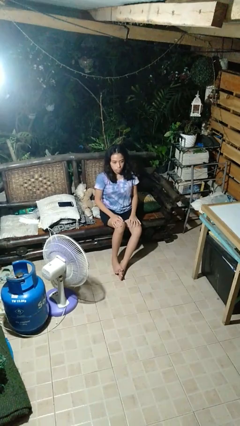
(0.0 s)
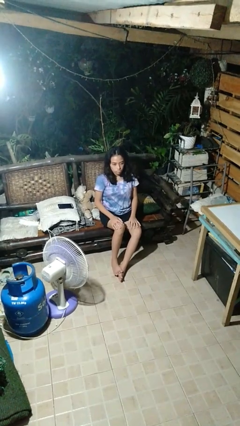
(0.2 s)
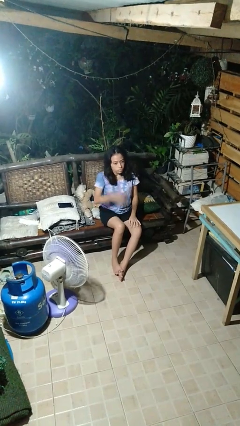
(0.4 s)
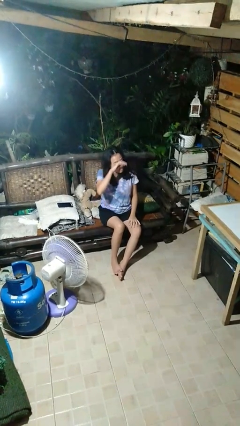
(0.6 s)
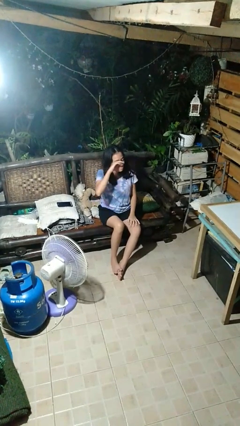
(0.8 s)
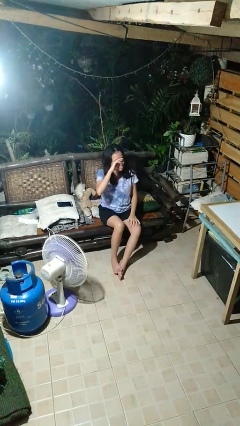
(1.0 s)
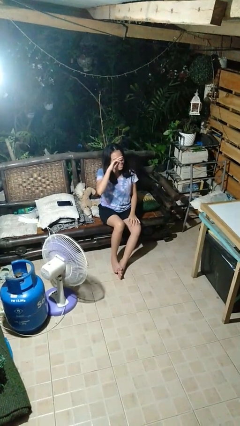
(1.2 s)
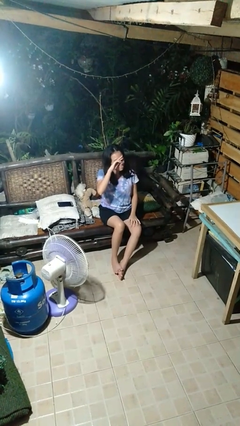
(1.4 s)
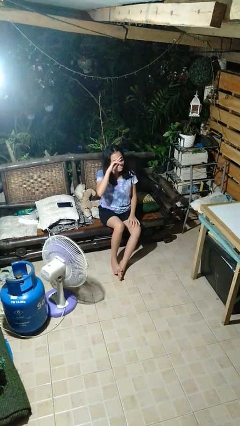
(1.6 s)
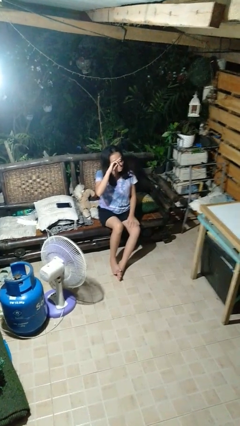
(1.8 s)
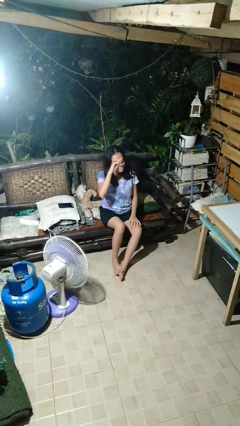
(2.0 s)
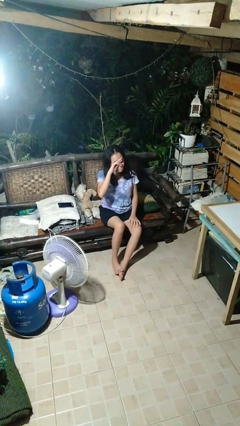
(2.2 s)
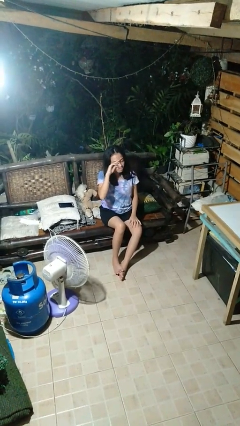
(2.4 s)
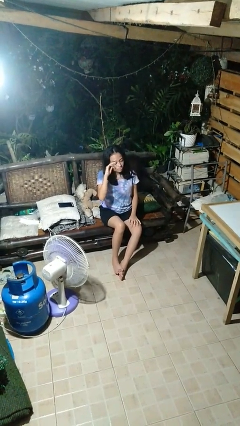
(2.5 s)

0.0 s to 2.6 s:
person rubs eyes

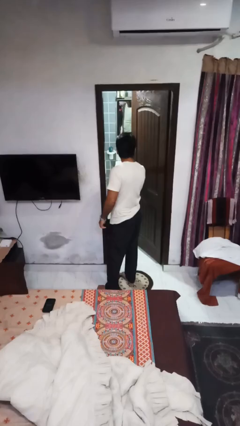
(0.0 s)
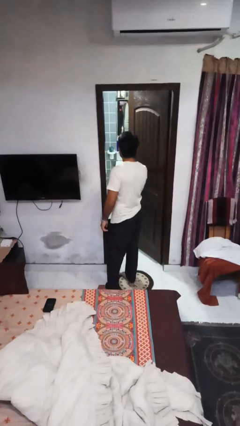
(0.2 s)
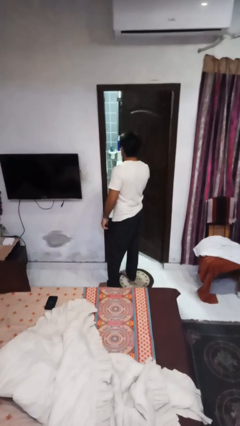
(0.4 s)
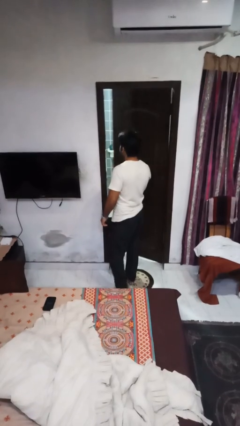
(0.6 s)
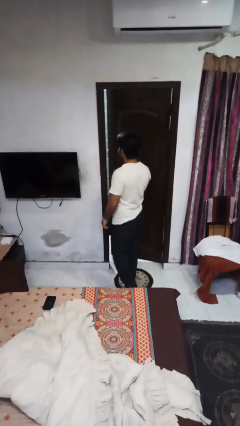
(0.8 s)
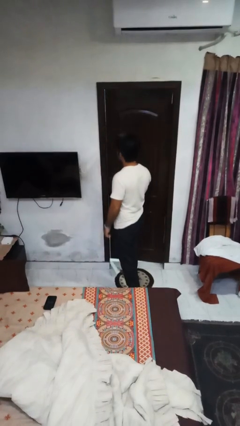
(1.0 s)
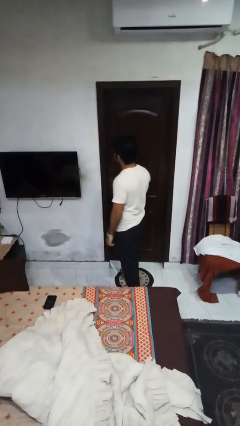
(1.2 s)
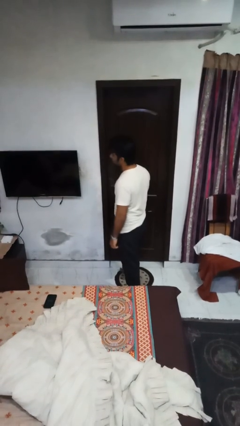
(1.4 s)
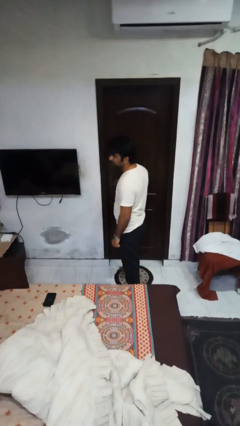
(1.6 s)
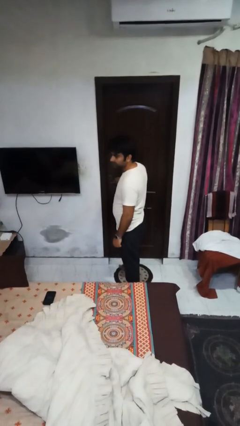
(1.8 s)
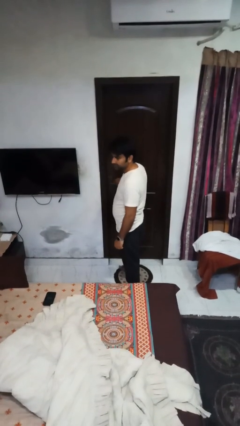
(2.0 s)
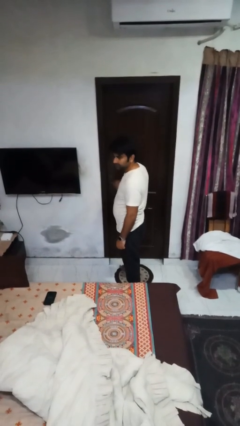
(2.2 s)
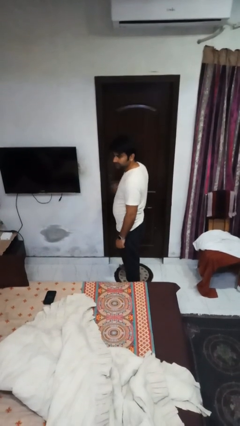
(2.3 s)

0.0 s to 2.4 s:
person closes facility door

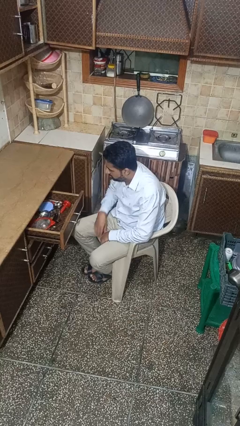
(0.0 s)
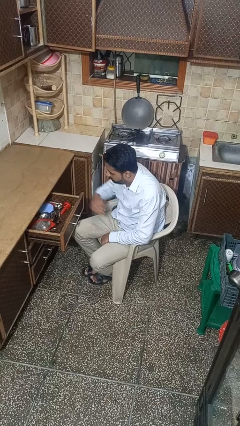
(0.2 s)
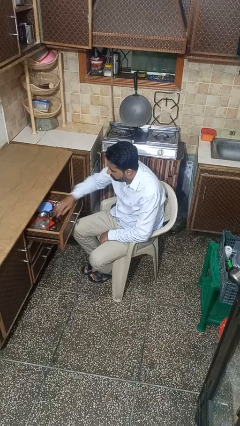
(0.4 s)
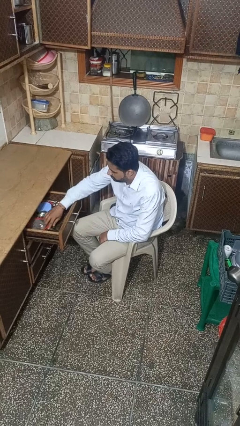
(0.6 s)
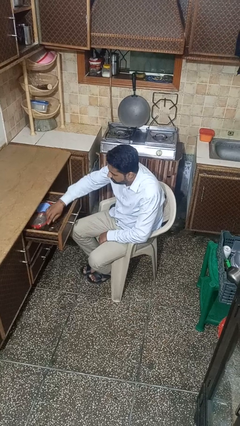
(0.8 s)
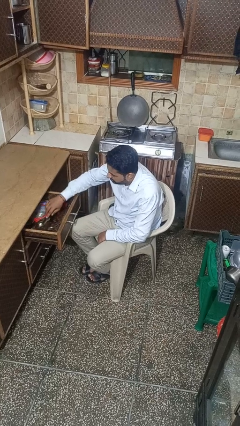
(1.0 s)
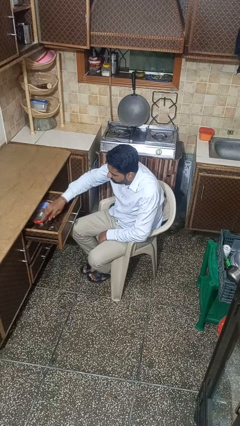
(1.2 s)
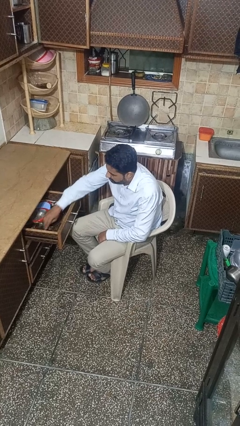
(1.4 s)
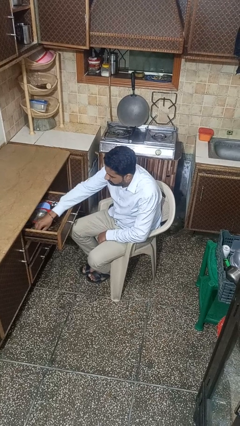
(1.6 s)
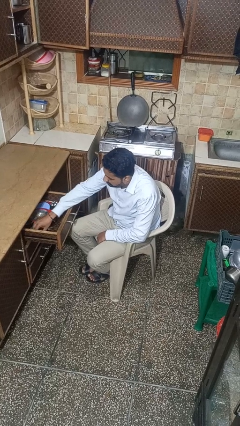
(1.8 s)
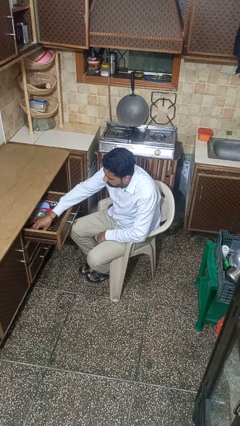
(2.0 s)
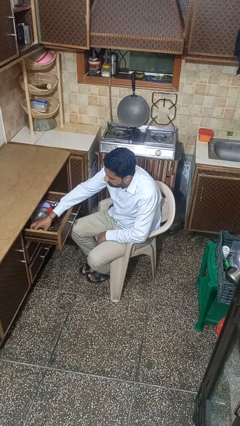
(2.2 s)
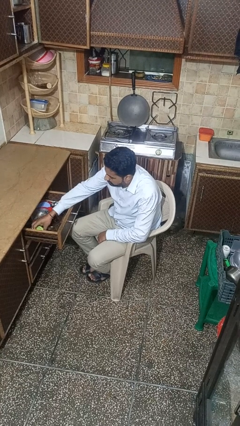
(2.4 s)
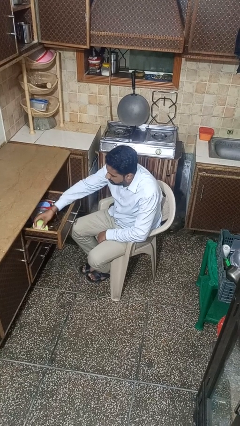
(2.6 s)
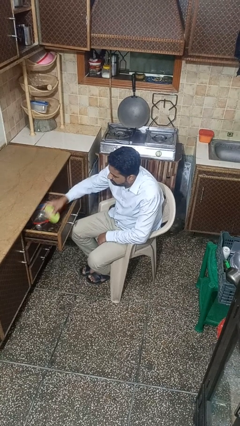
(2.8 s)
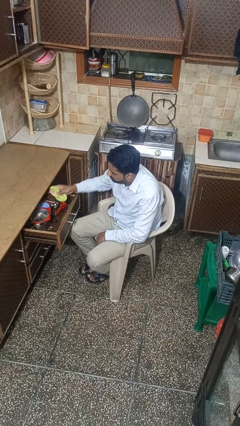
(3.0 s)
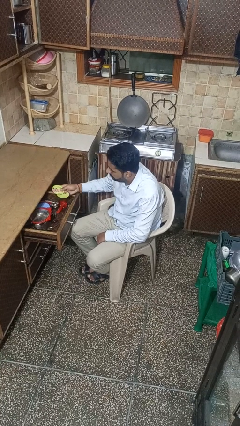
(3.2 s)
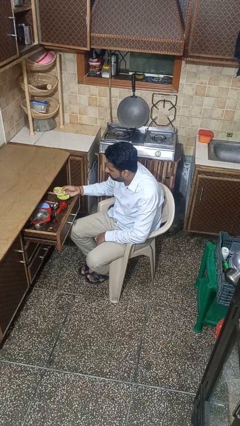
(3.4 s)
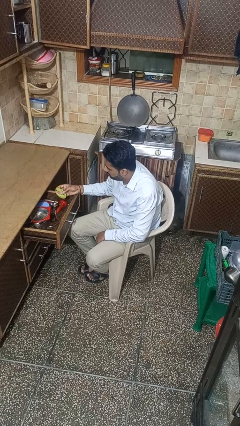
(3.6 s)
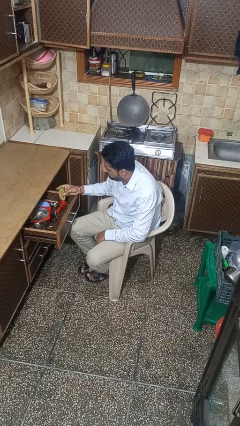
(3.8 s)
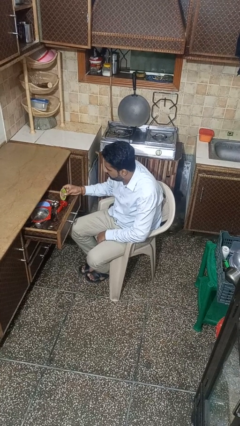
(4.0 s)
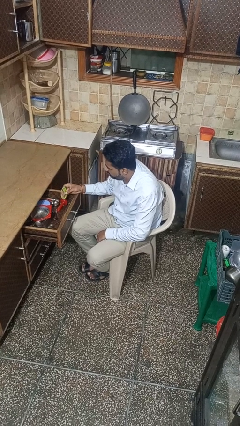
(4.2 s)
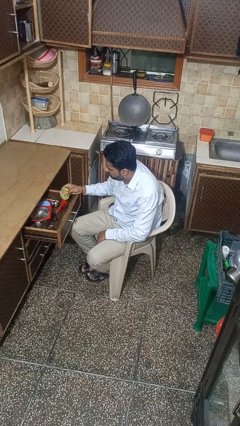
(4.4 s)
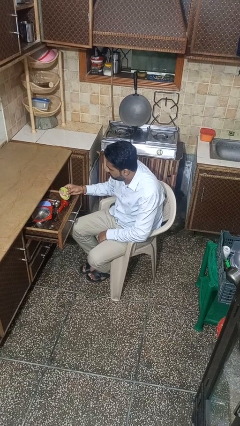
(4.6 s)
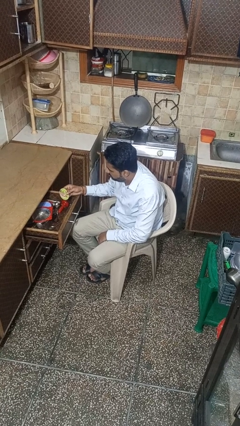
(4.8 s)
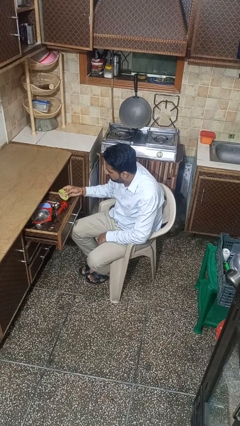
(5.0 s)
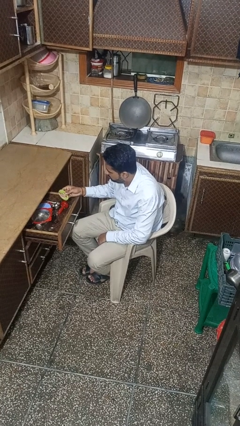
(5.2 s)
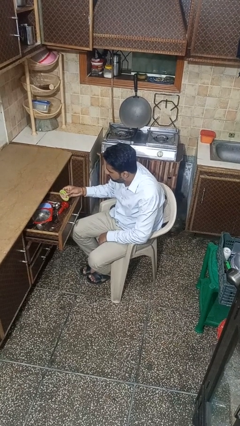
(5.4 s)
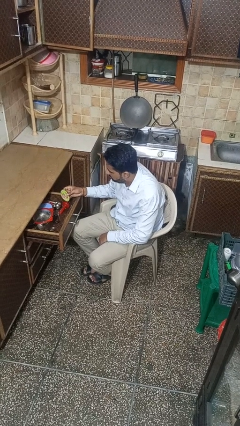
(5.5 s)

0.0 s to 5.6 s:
person takes object from kitchen drawer

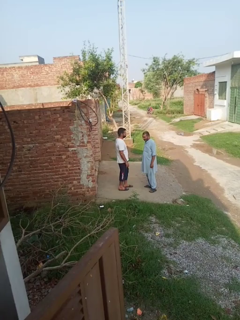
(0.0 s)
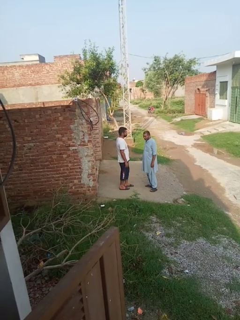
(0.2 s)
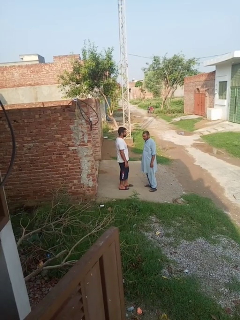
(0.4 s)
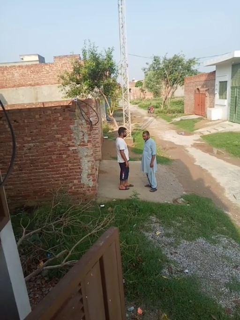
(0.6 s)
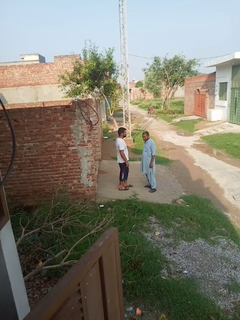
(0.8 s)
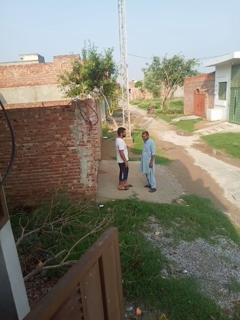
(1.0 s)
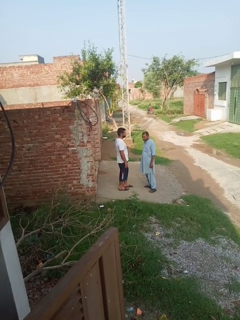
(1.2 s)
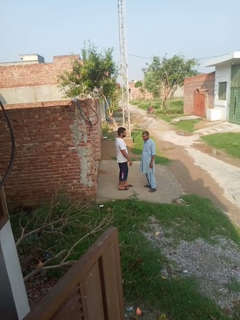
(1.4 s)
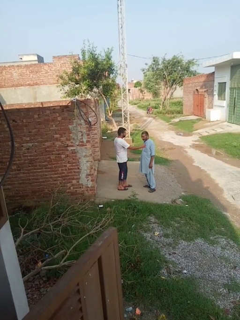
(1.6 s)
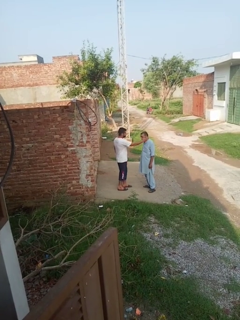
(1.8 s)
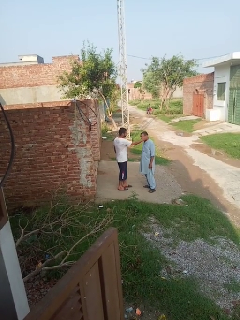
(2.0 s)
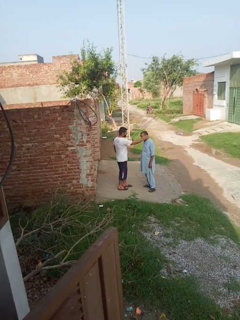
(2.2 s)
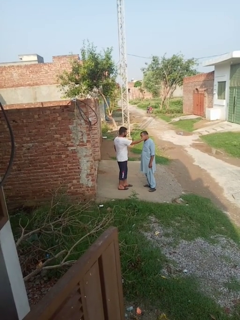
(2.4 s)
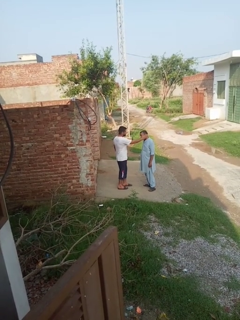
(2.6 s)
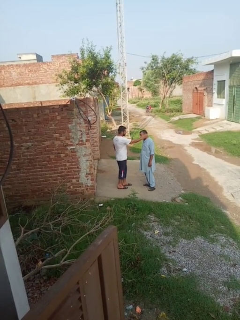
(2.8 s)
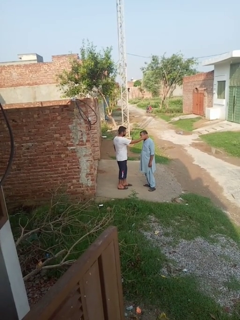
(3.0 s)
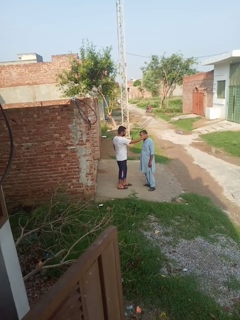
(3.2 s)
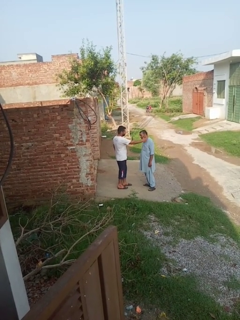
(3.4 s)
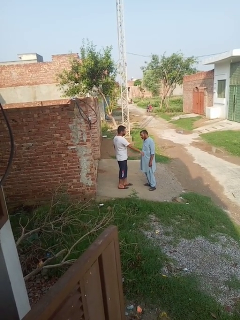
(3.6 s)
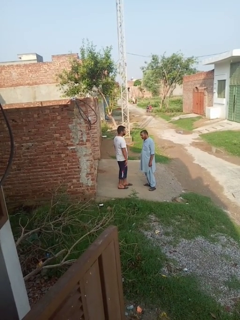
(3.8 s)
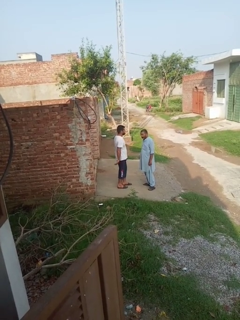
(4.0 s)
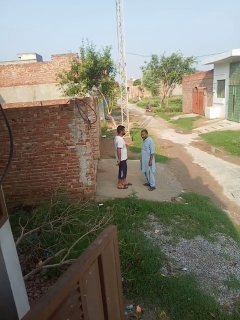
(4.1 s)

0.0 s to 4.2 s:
person touches face of person

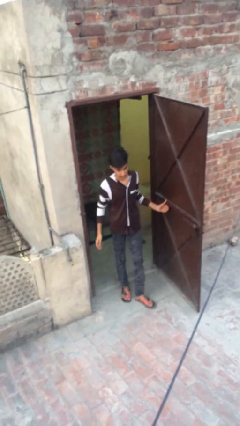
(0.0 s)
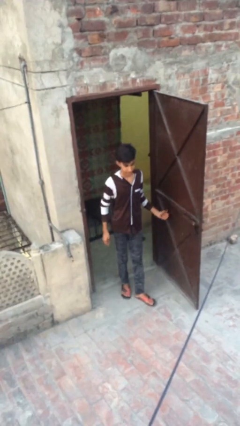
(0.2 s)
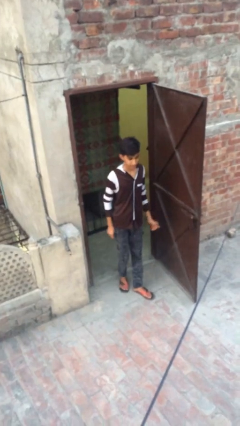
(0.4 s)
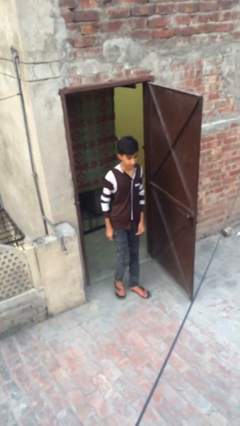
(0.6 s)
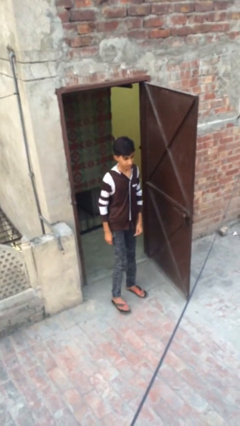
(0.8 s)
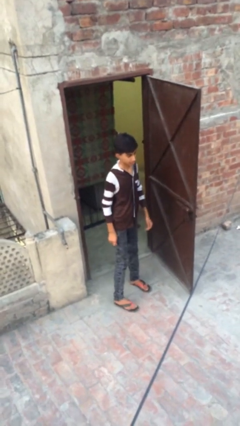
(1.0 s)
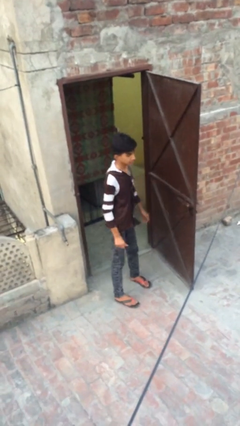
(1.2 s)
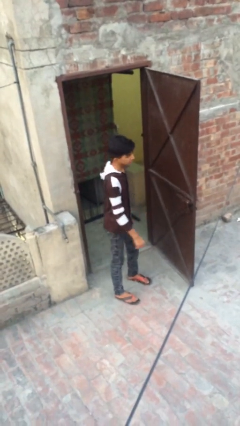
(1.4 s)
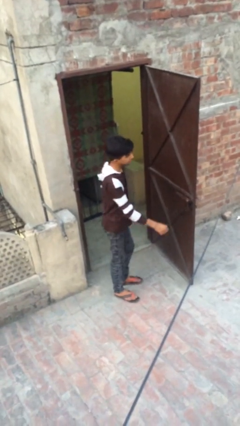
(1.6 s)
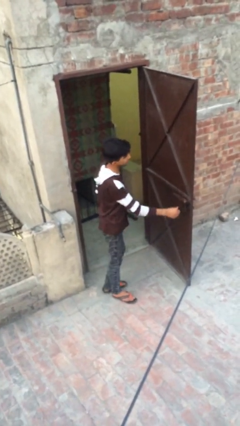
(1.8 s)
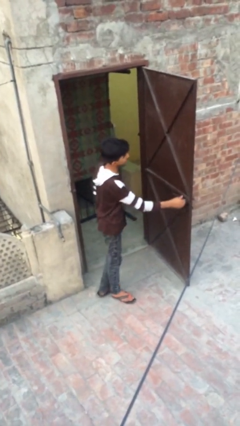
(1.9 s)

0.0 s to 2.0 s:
person enters scene through structure

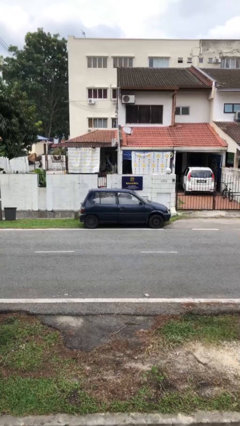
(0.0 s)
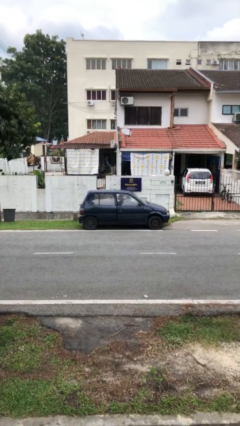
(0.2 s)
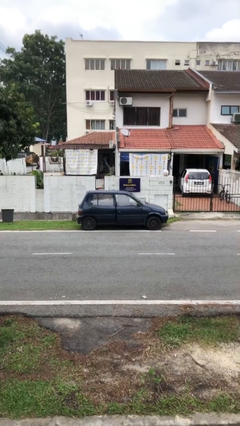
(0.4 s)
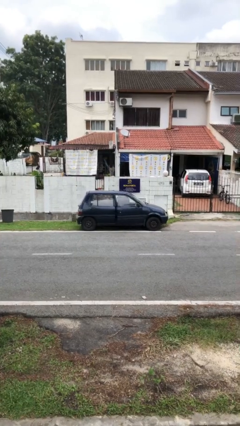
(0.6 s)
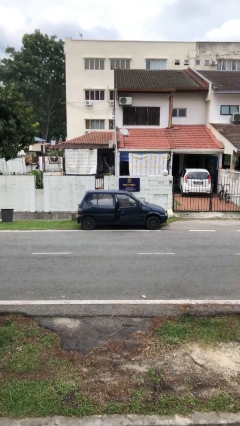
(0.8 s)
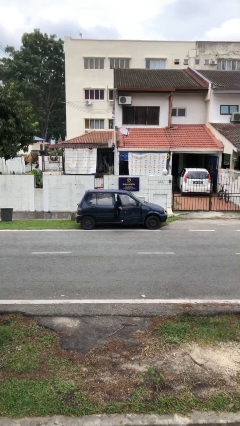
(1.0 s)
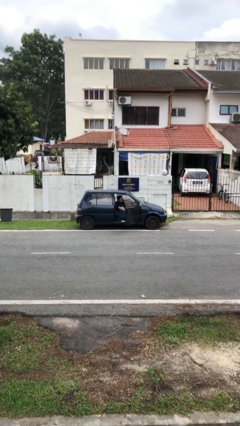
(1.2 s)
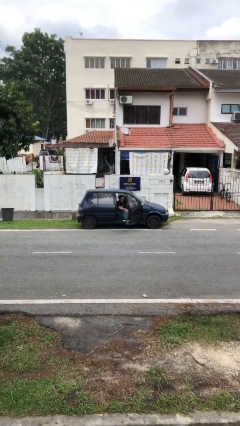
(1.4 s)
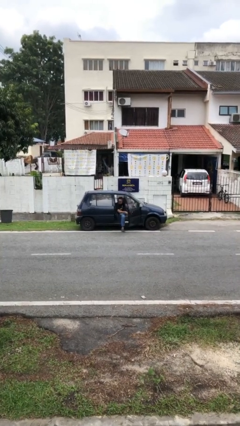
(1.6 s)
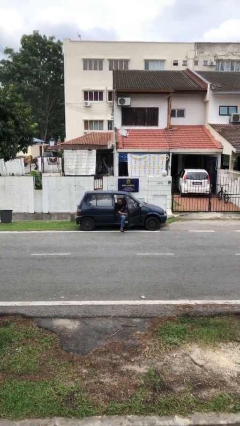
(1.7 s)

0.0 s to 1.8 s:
person opens car door
